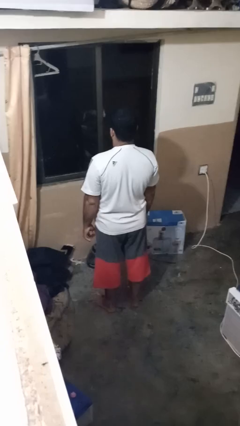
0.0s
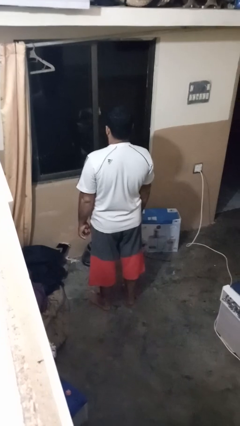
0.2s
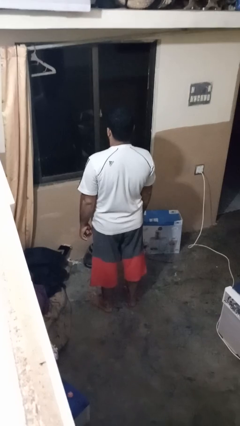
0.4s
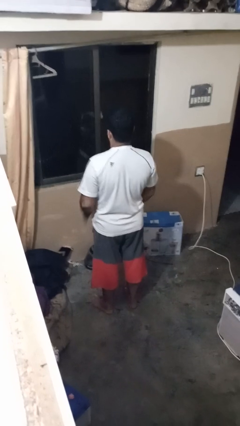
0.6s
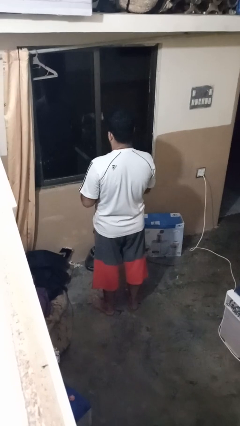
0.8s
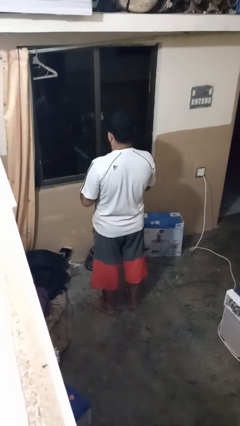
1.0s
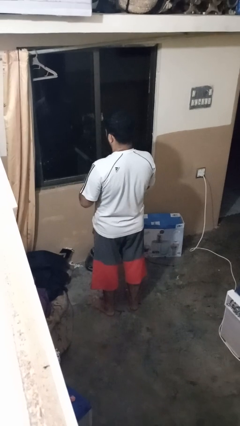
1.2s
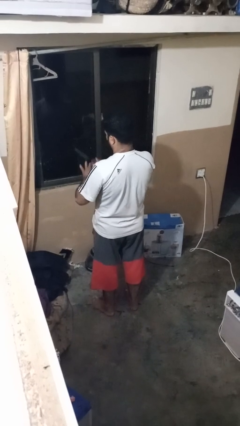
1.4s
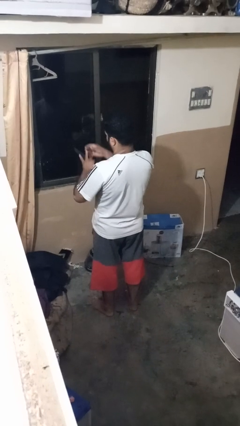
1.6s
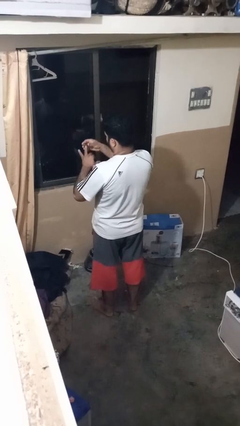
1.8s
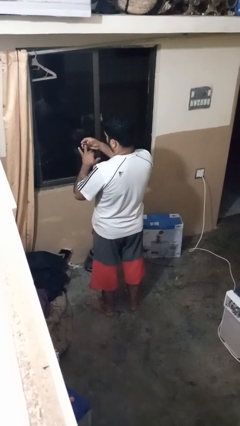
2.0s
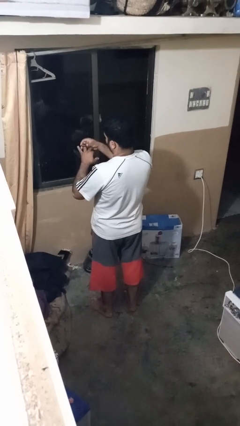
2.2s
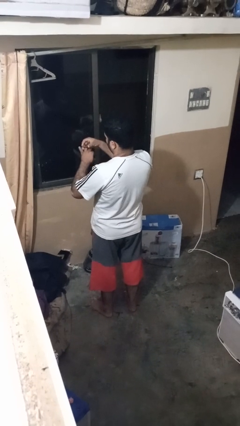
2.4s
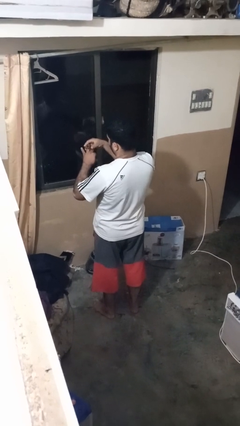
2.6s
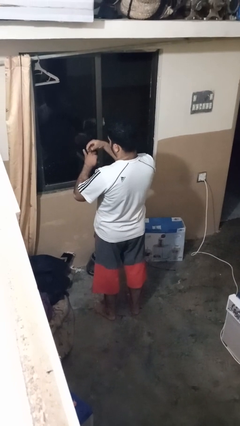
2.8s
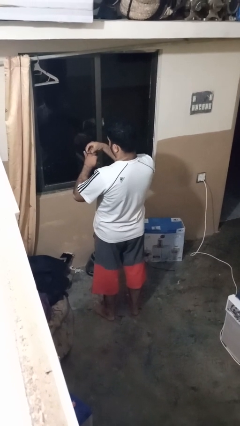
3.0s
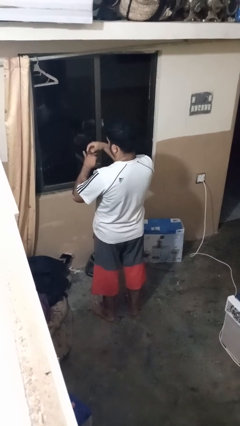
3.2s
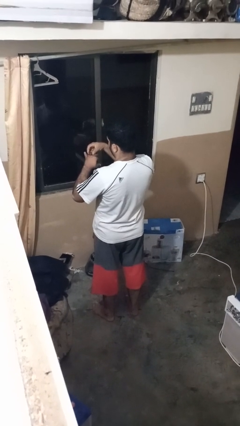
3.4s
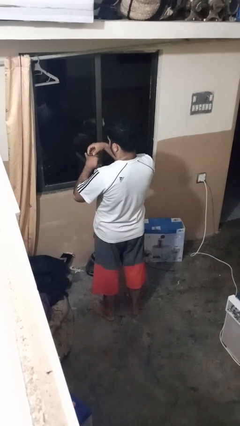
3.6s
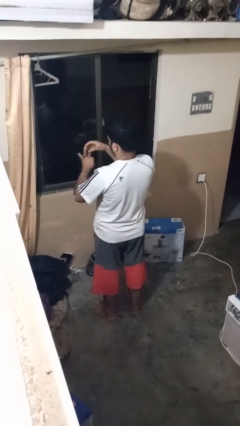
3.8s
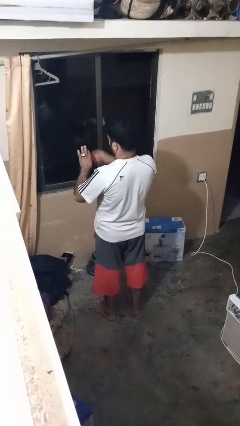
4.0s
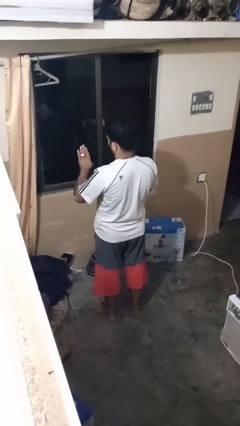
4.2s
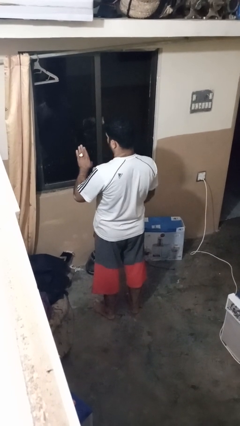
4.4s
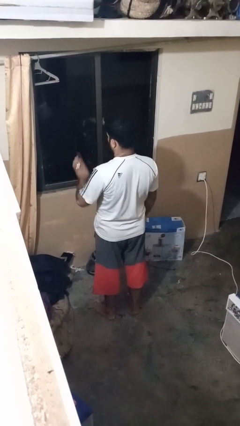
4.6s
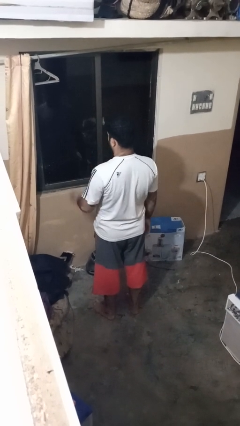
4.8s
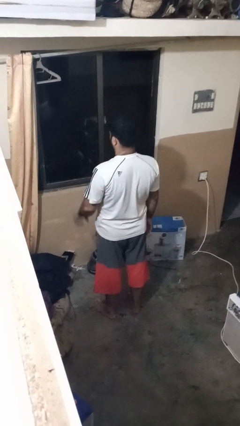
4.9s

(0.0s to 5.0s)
person puts on ring

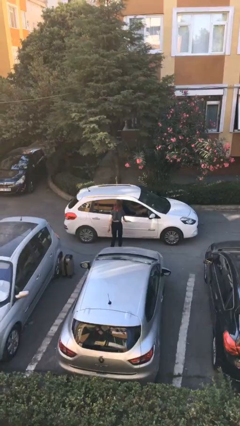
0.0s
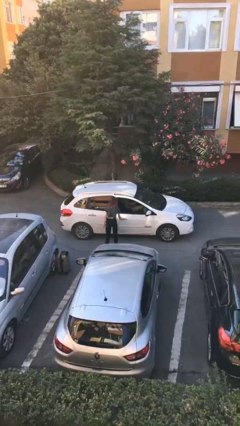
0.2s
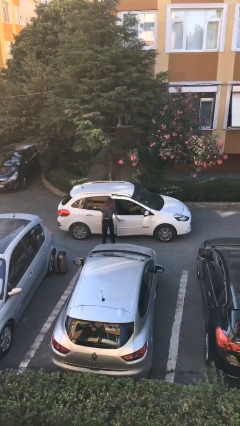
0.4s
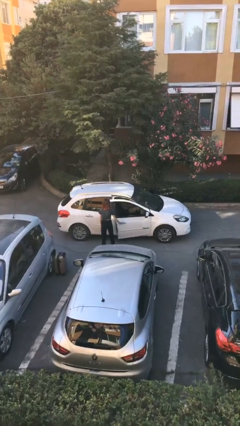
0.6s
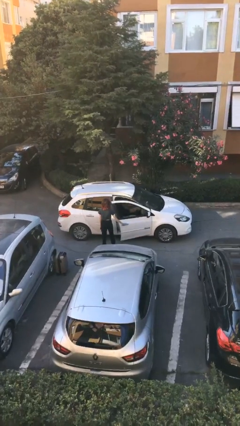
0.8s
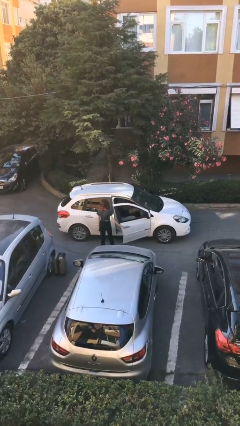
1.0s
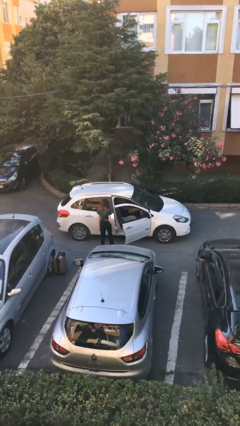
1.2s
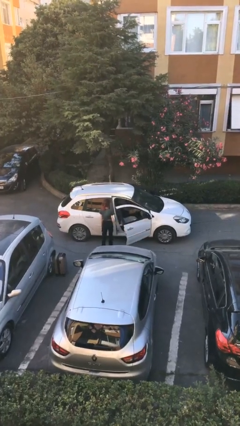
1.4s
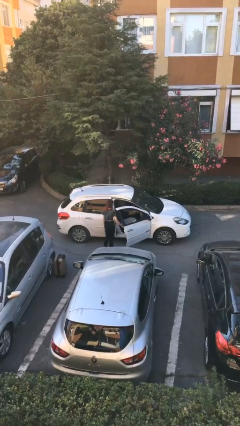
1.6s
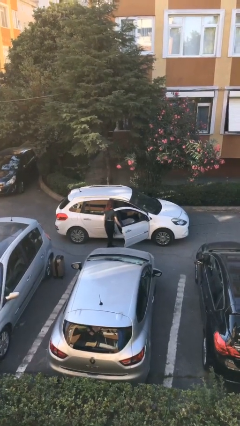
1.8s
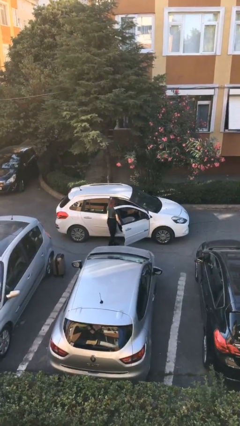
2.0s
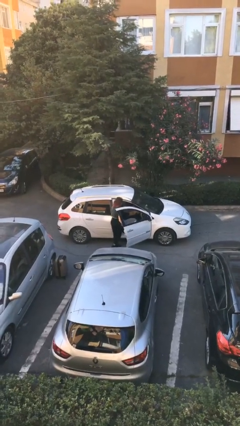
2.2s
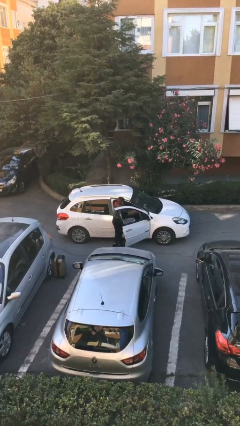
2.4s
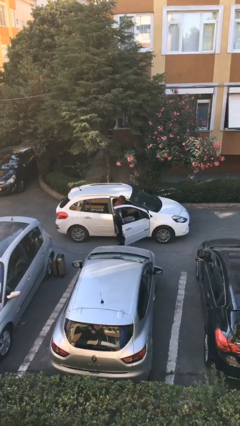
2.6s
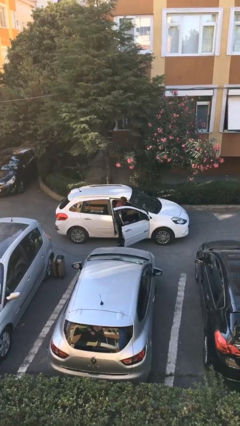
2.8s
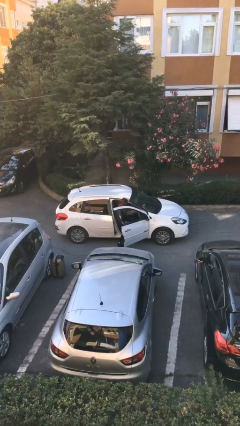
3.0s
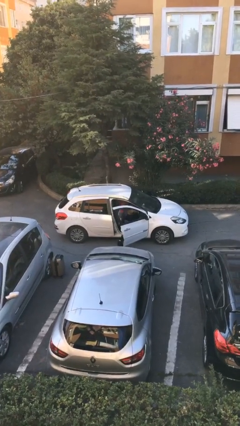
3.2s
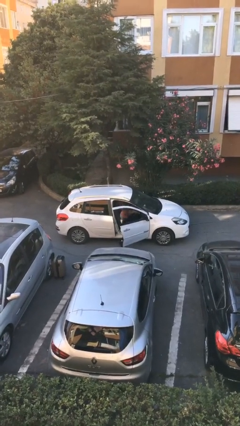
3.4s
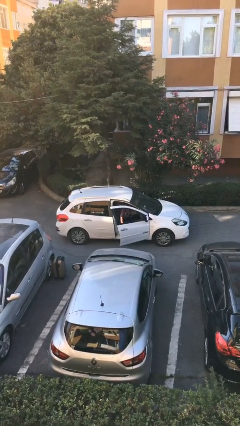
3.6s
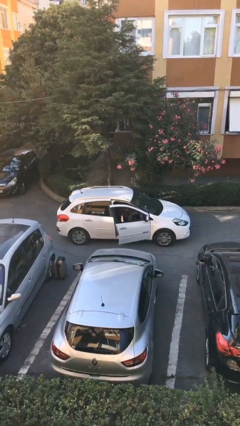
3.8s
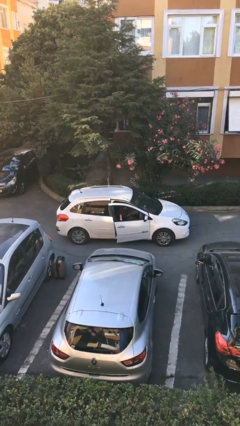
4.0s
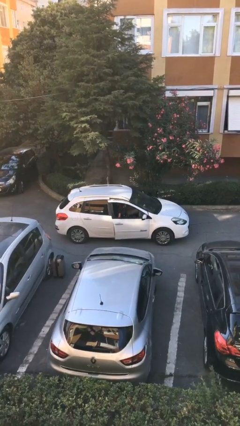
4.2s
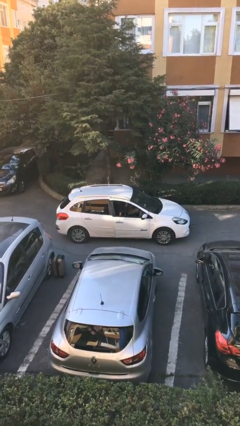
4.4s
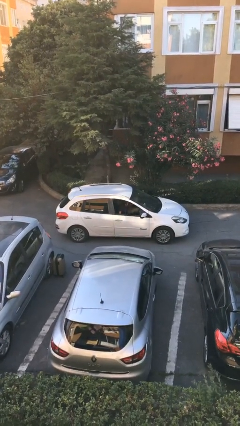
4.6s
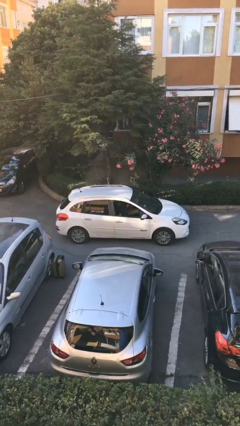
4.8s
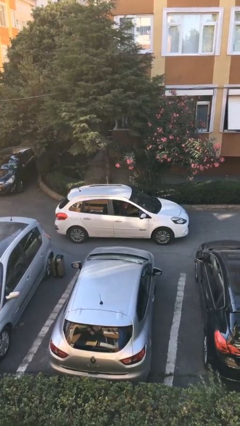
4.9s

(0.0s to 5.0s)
car picks up person

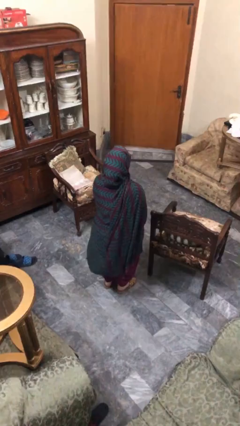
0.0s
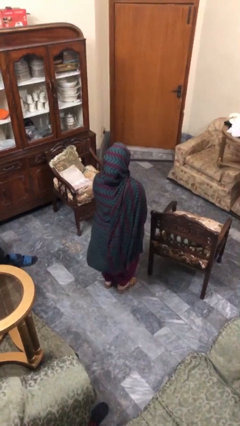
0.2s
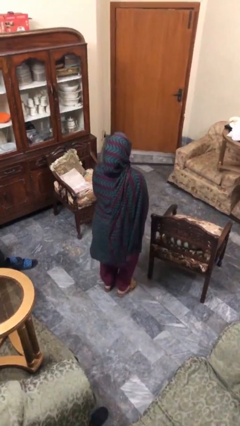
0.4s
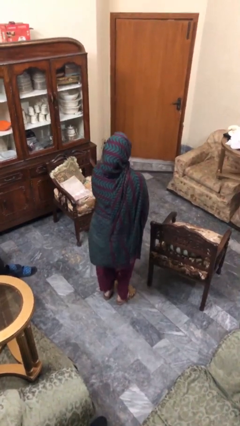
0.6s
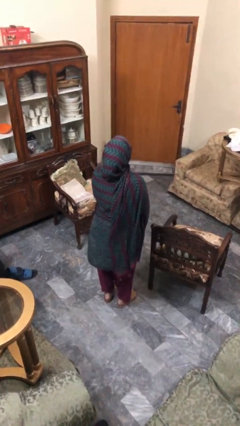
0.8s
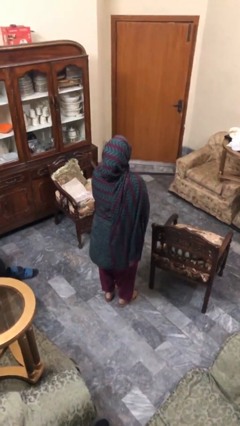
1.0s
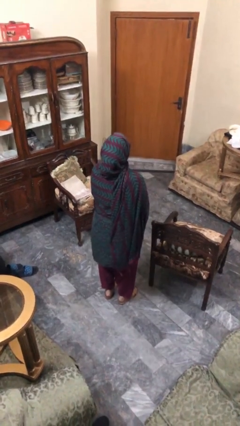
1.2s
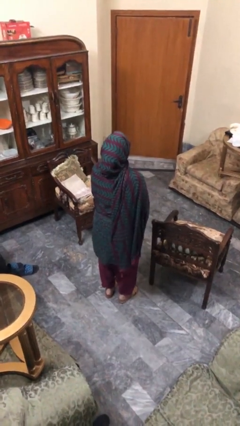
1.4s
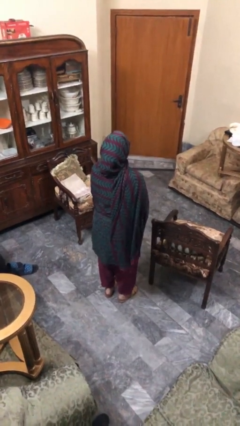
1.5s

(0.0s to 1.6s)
person stands up

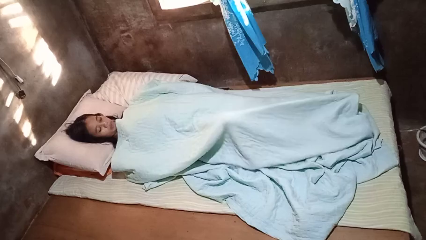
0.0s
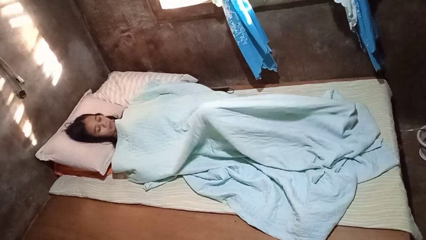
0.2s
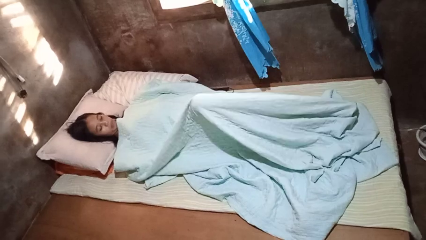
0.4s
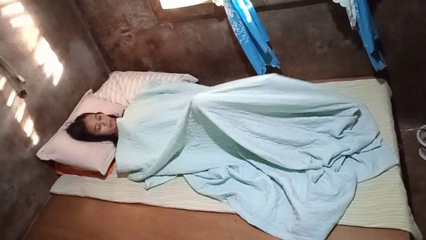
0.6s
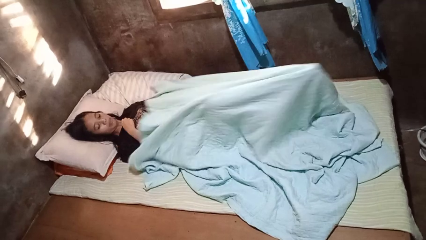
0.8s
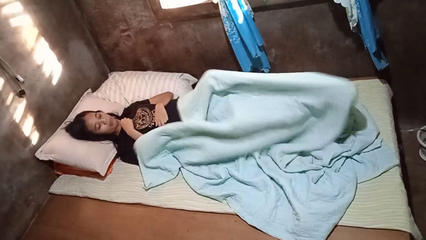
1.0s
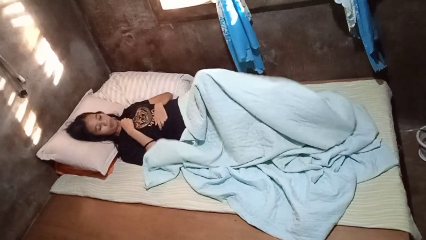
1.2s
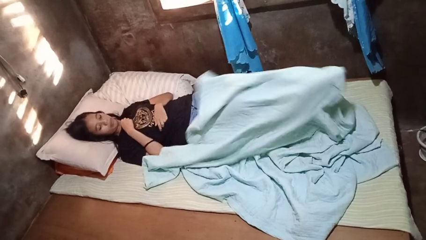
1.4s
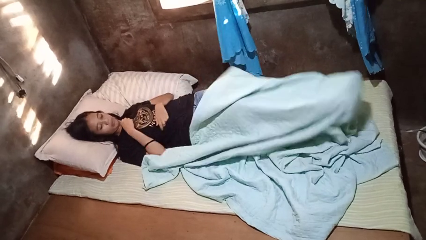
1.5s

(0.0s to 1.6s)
person uncovers with bedsheets

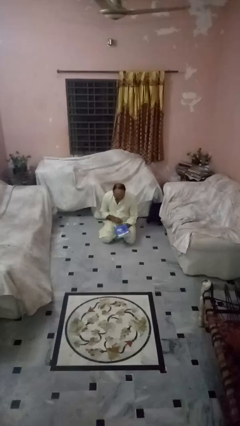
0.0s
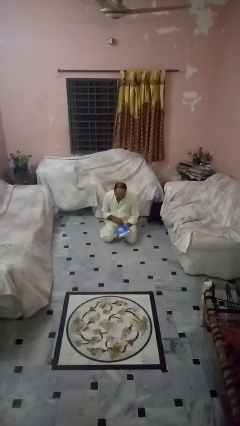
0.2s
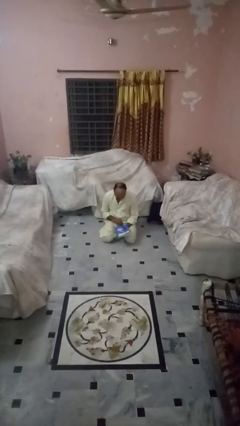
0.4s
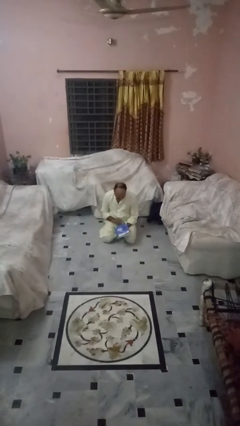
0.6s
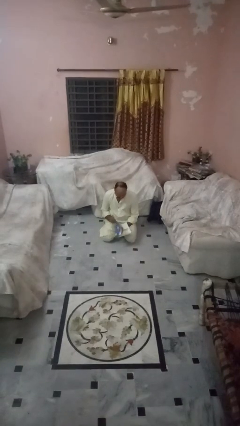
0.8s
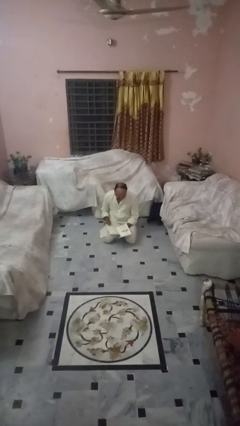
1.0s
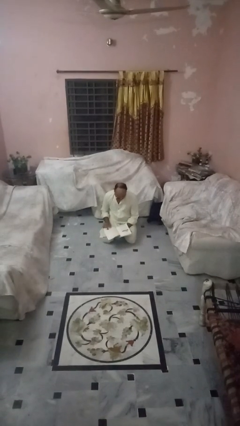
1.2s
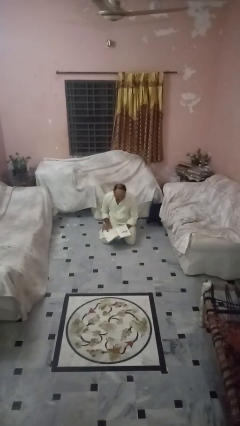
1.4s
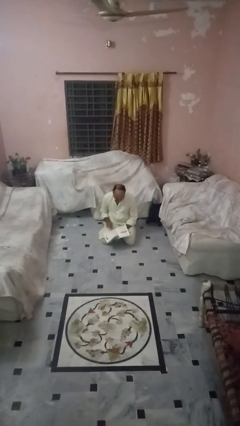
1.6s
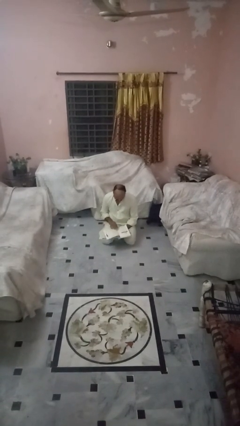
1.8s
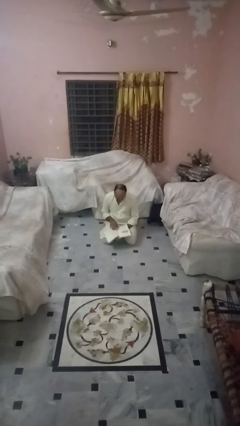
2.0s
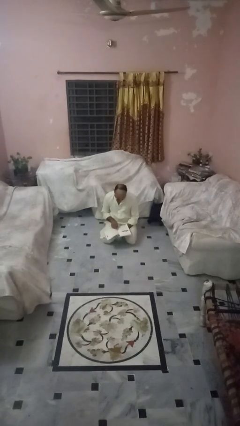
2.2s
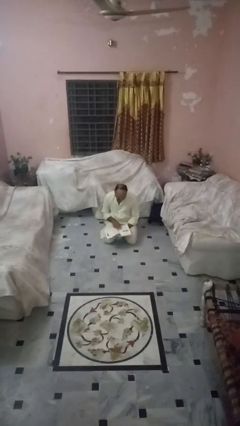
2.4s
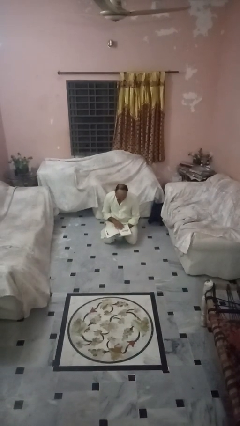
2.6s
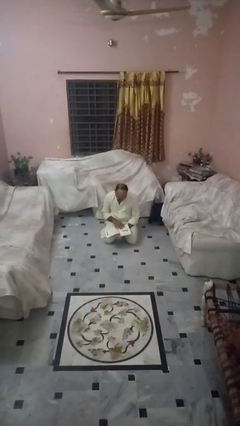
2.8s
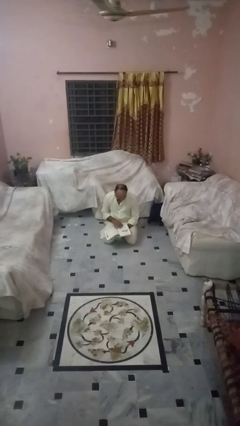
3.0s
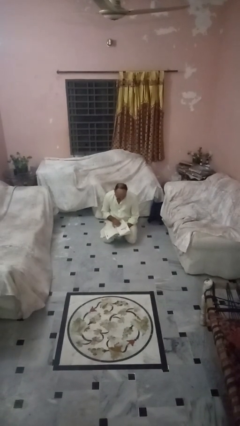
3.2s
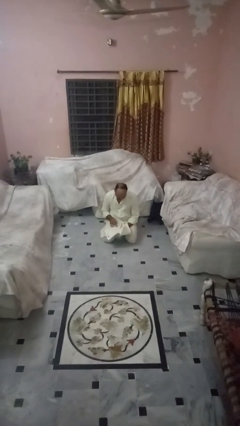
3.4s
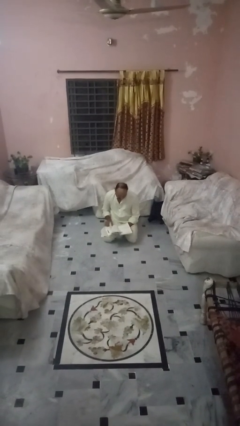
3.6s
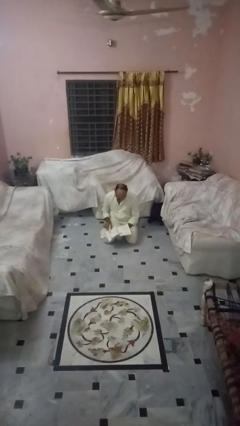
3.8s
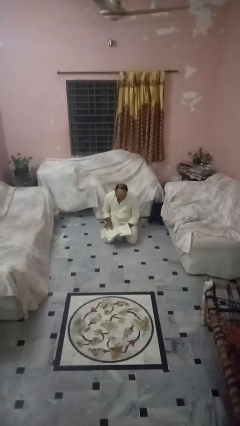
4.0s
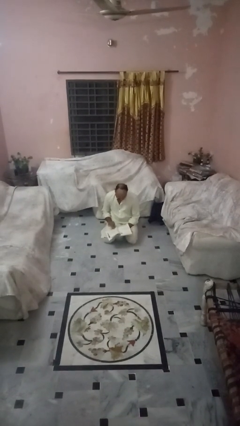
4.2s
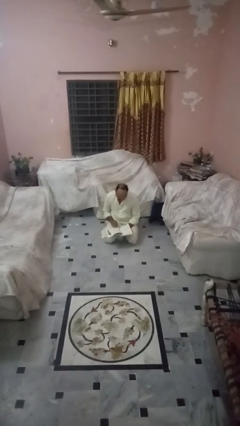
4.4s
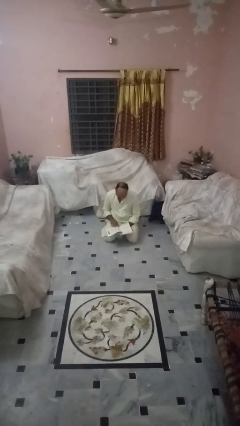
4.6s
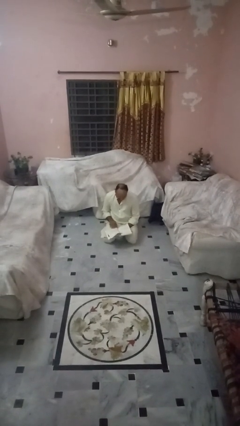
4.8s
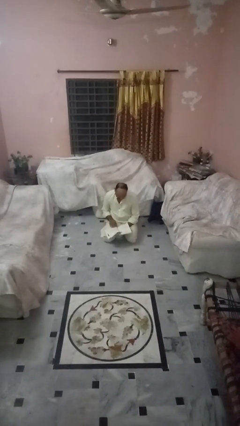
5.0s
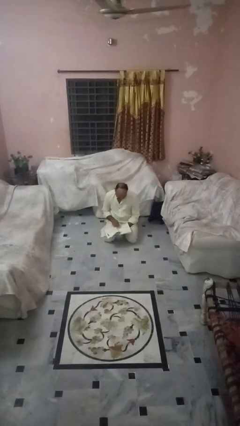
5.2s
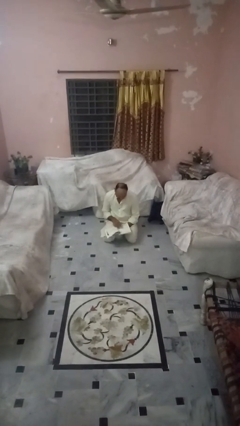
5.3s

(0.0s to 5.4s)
person reads book
